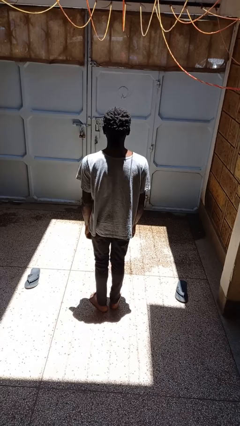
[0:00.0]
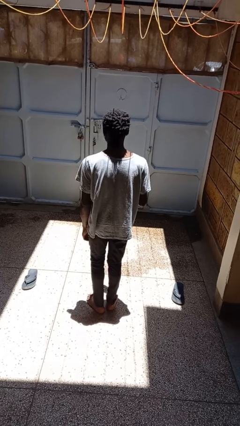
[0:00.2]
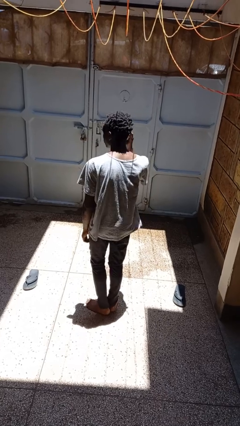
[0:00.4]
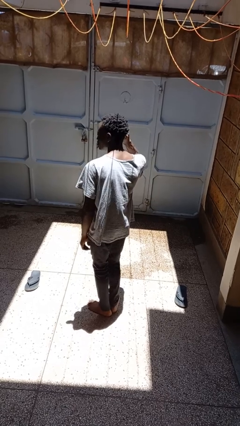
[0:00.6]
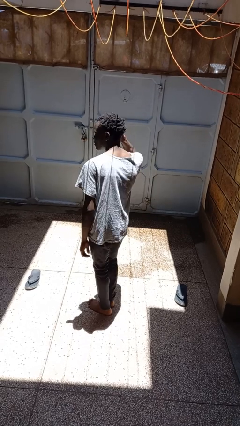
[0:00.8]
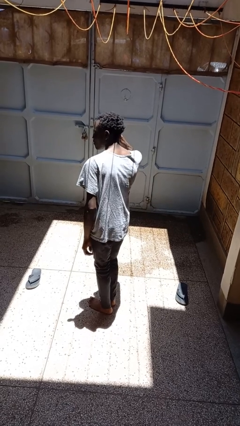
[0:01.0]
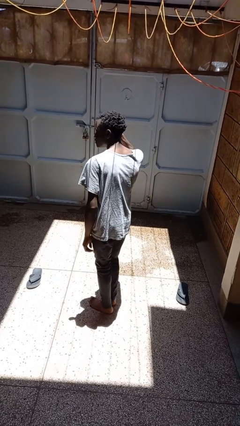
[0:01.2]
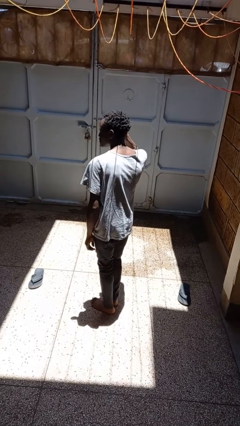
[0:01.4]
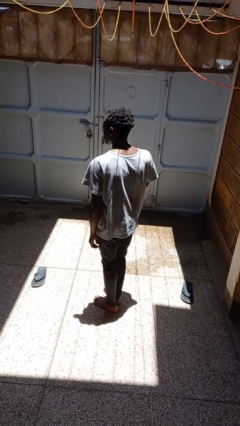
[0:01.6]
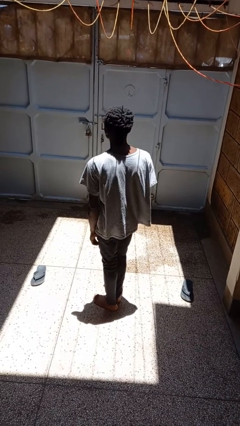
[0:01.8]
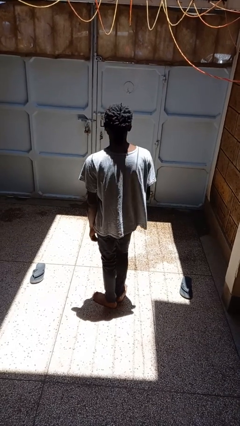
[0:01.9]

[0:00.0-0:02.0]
person touches earlobe

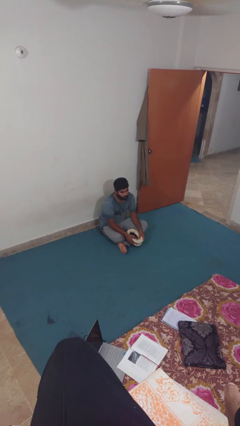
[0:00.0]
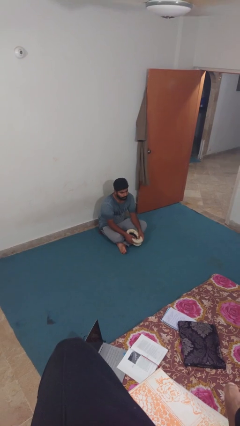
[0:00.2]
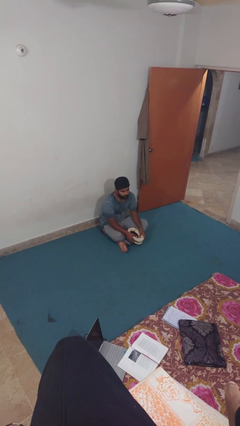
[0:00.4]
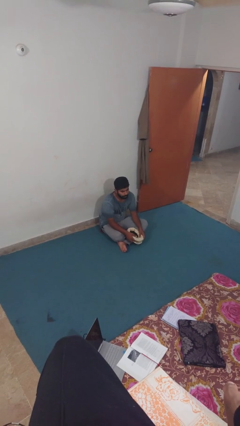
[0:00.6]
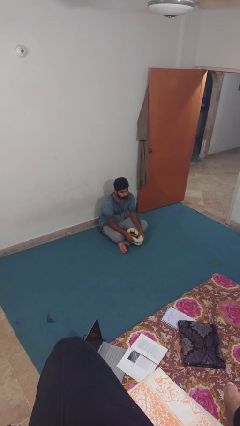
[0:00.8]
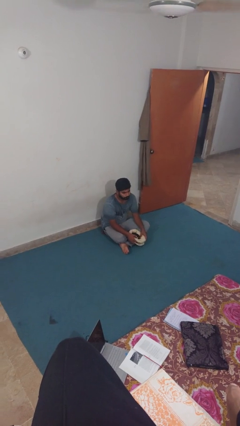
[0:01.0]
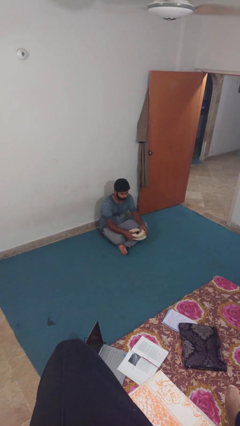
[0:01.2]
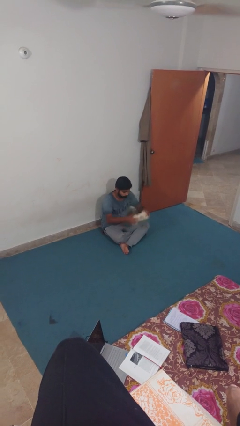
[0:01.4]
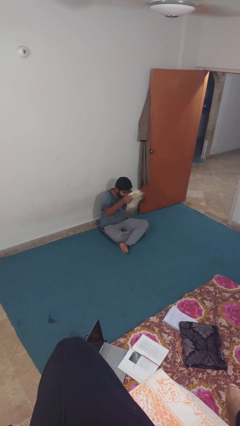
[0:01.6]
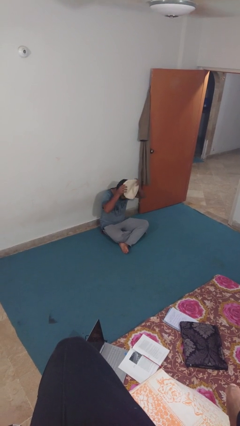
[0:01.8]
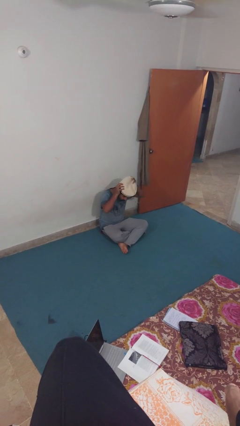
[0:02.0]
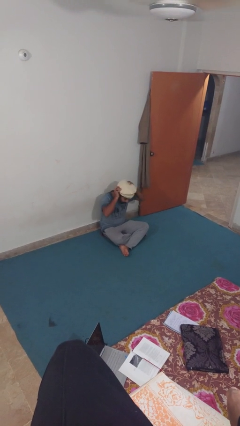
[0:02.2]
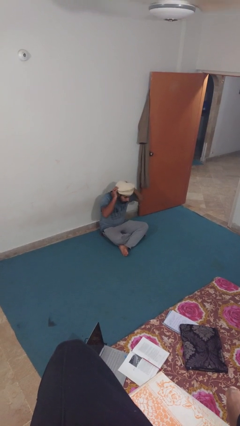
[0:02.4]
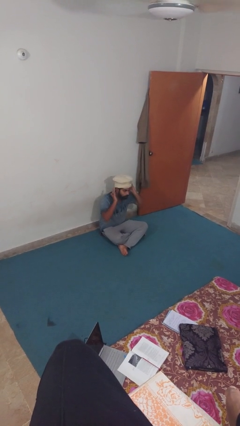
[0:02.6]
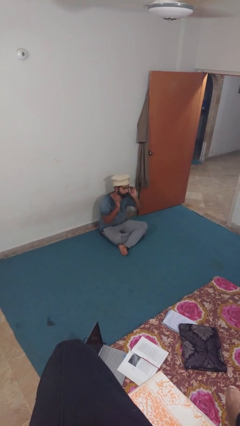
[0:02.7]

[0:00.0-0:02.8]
person puts on hat

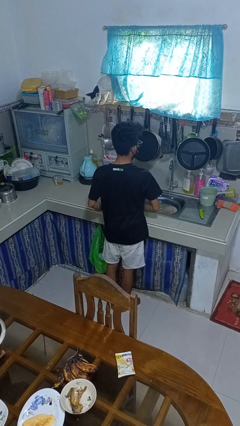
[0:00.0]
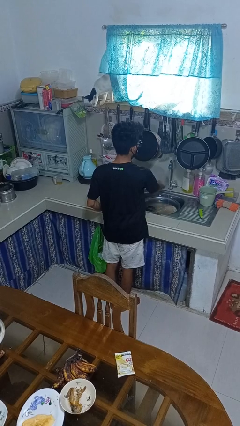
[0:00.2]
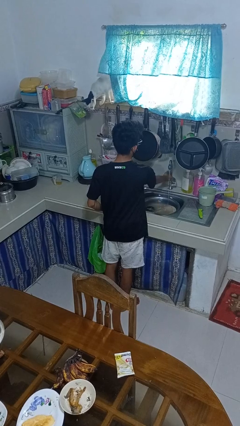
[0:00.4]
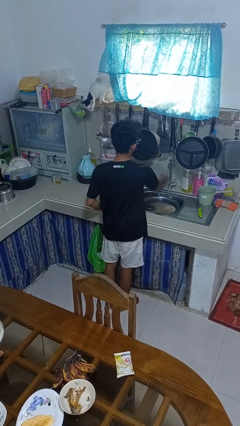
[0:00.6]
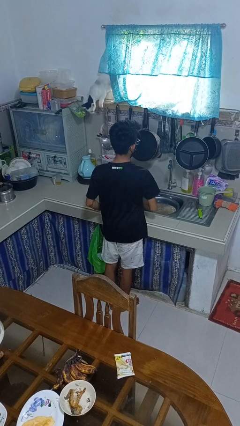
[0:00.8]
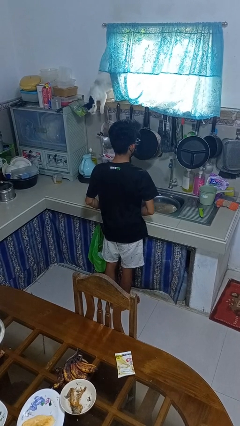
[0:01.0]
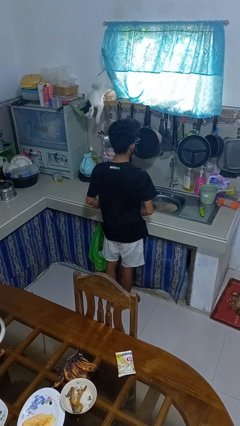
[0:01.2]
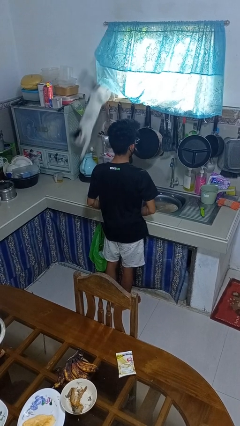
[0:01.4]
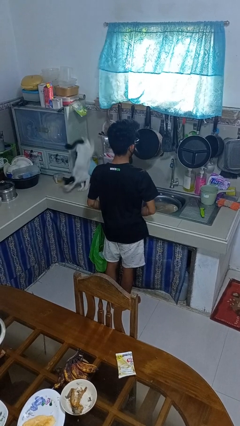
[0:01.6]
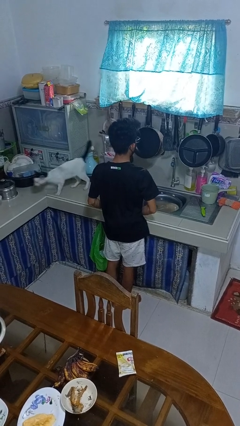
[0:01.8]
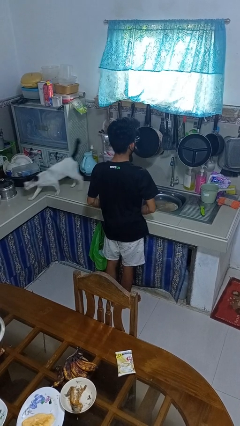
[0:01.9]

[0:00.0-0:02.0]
person turns off faucet

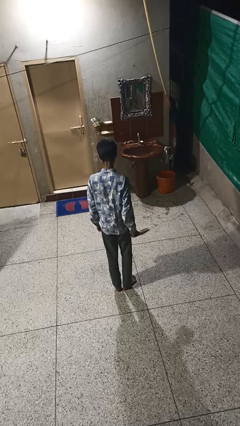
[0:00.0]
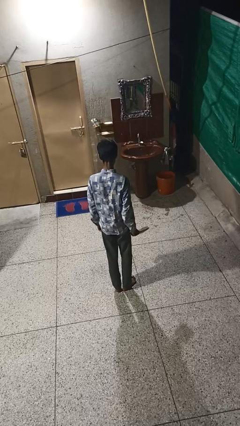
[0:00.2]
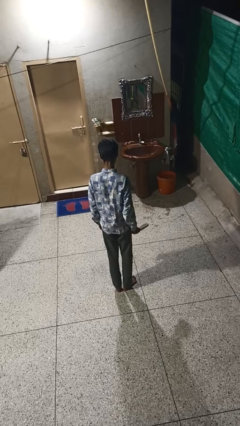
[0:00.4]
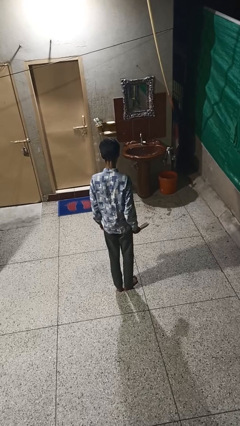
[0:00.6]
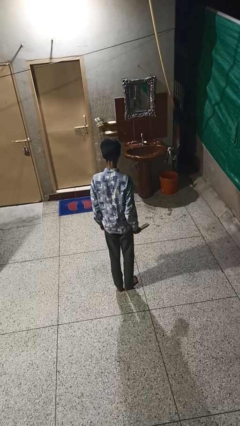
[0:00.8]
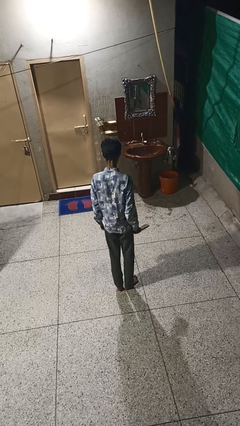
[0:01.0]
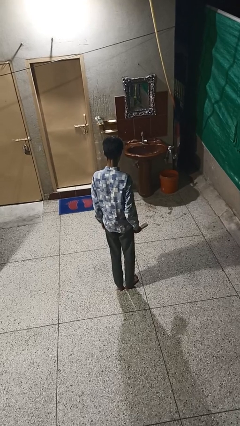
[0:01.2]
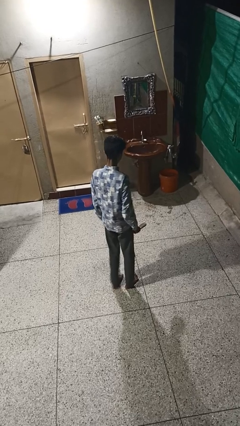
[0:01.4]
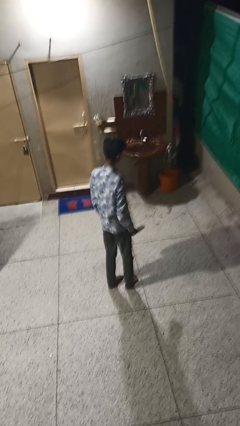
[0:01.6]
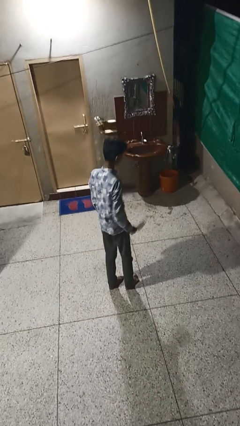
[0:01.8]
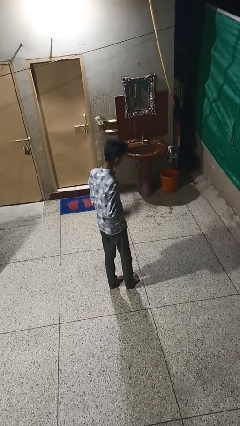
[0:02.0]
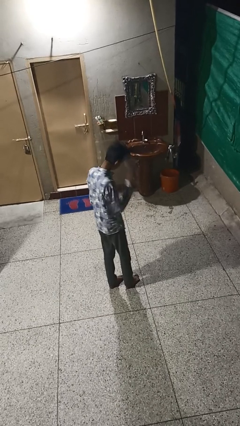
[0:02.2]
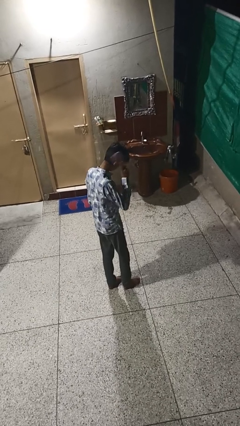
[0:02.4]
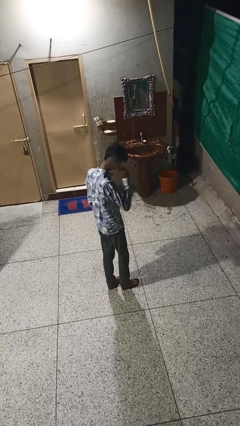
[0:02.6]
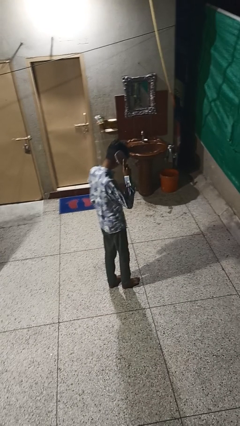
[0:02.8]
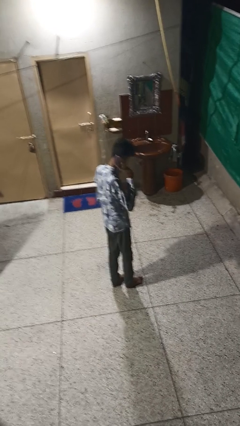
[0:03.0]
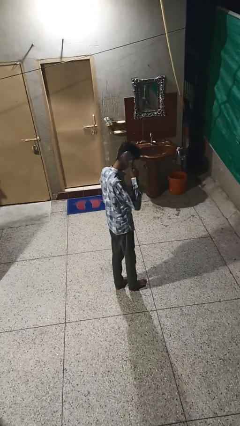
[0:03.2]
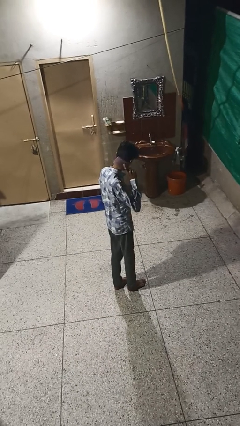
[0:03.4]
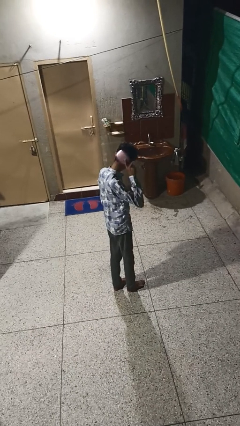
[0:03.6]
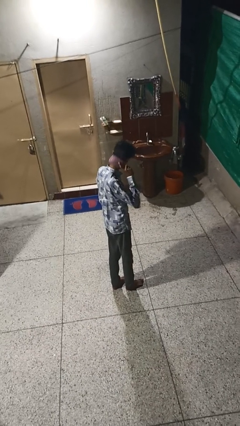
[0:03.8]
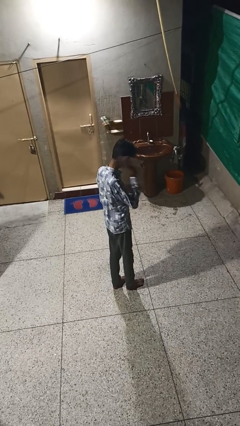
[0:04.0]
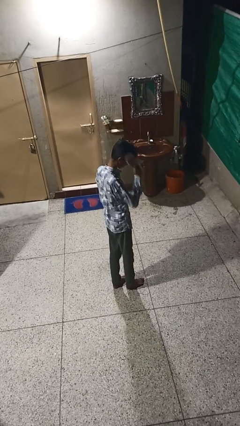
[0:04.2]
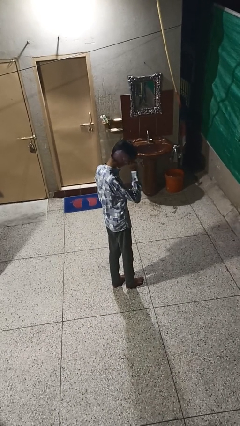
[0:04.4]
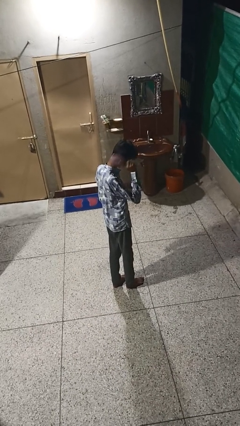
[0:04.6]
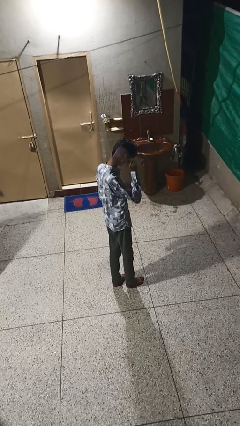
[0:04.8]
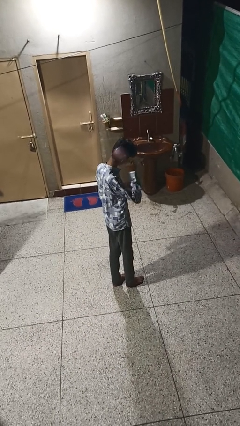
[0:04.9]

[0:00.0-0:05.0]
person takes off wristwatch

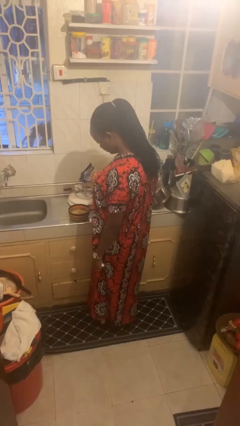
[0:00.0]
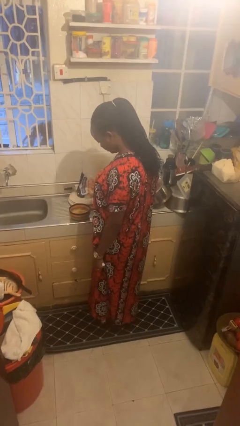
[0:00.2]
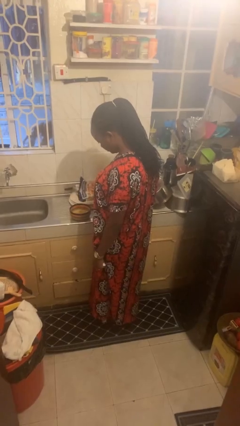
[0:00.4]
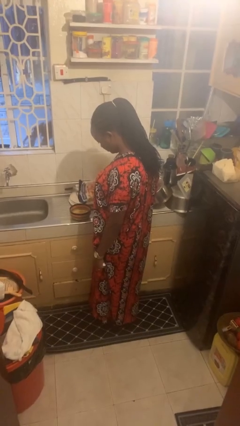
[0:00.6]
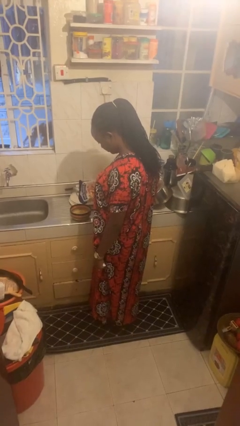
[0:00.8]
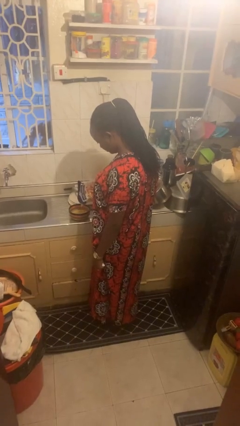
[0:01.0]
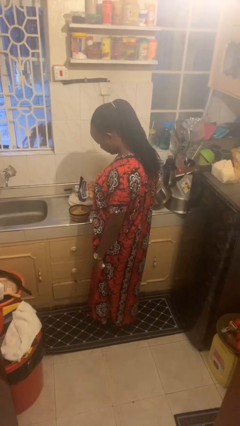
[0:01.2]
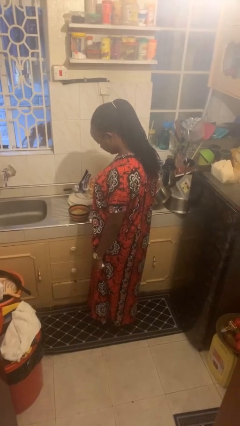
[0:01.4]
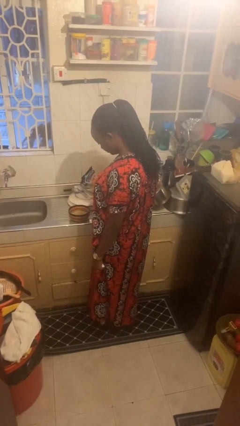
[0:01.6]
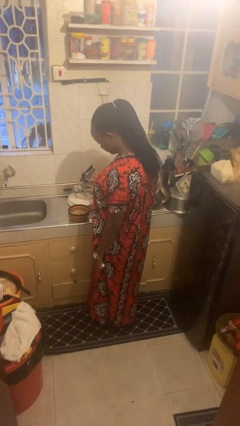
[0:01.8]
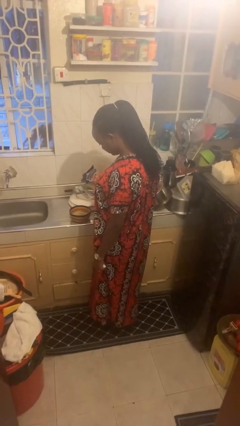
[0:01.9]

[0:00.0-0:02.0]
person pours into bowl

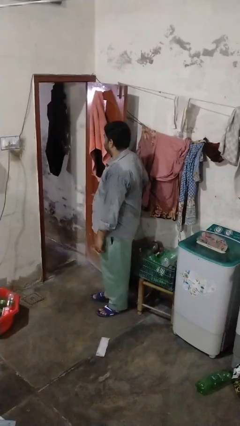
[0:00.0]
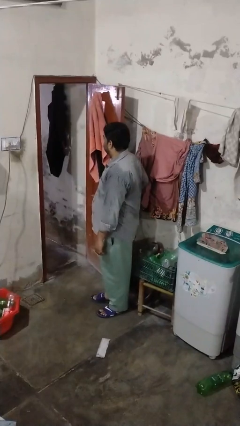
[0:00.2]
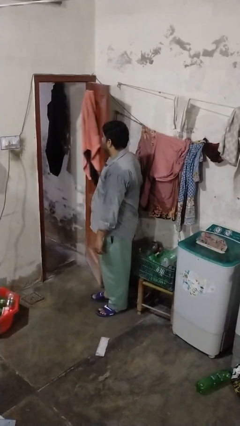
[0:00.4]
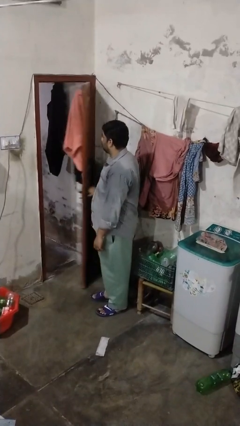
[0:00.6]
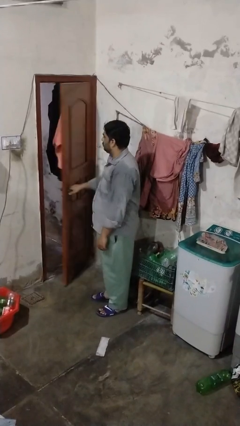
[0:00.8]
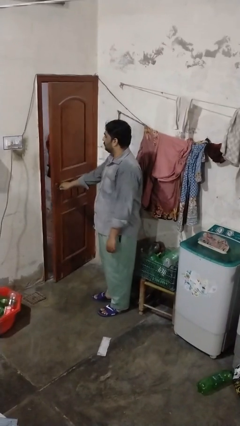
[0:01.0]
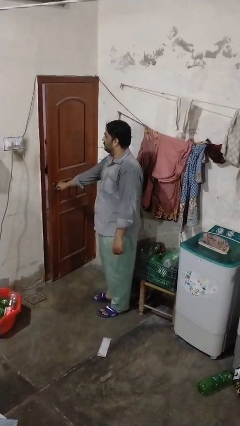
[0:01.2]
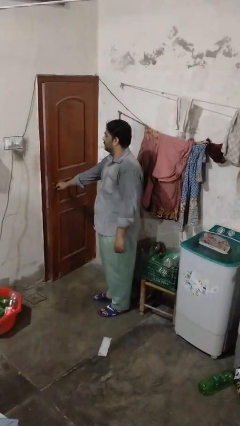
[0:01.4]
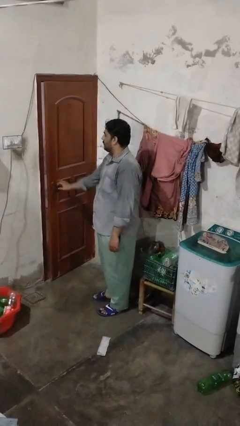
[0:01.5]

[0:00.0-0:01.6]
person closes closet door

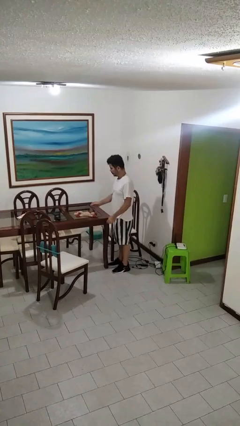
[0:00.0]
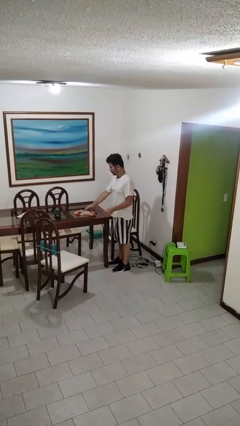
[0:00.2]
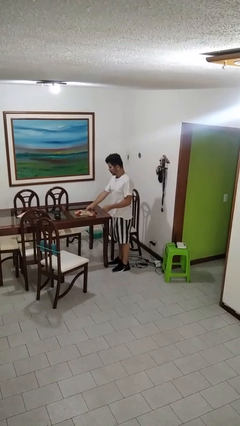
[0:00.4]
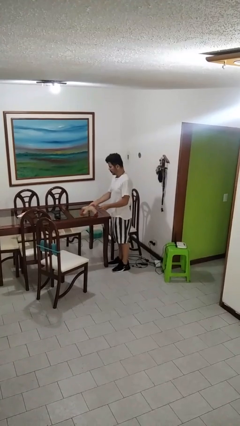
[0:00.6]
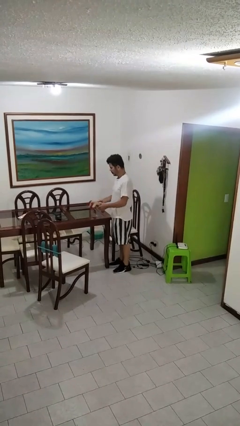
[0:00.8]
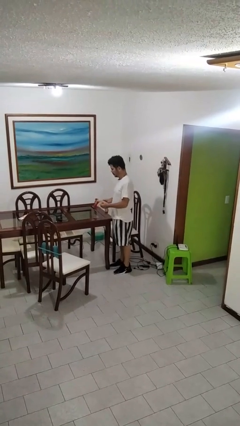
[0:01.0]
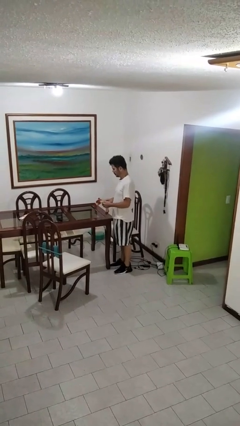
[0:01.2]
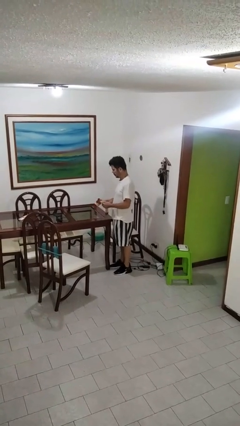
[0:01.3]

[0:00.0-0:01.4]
person picks up object from table
